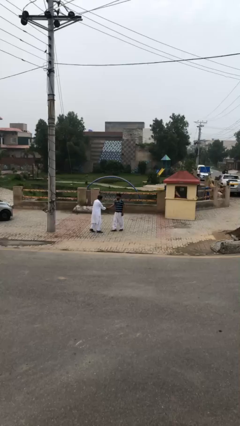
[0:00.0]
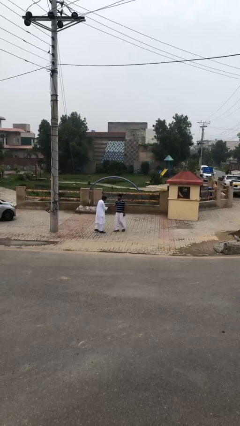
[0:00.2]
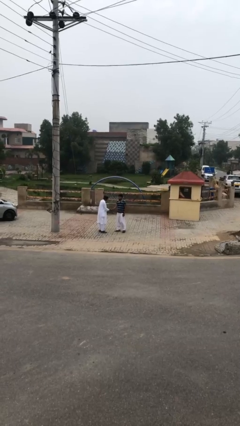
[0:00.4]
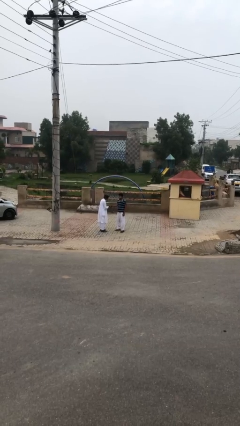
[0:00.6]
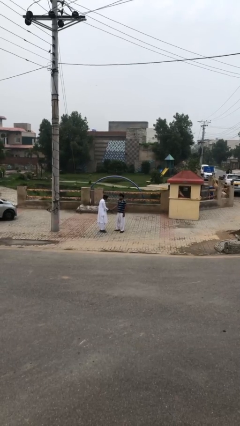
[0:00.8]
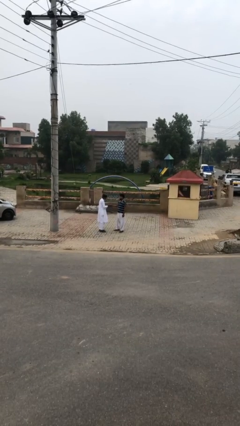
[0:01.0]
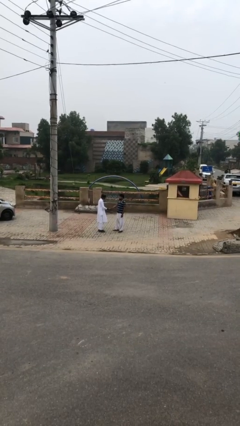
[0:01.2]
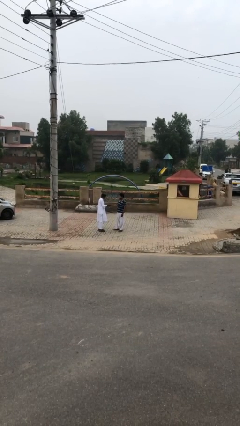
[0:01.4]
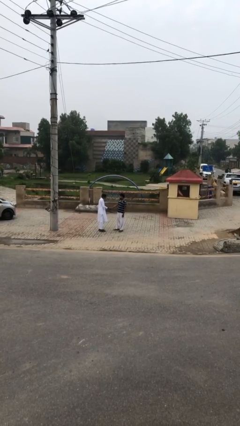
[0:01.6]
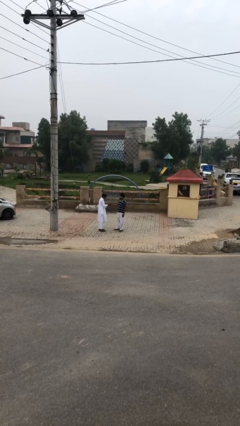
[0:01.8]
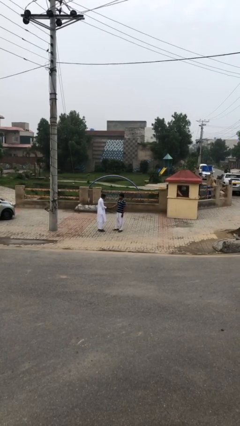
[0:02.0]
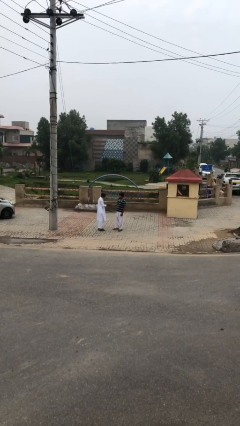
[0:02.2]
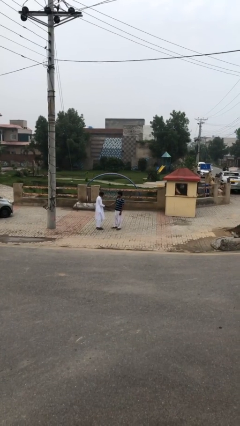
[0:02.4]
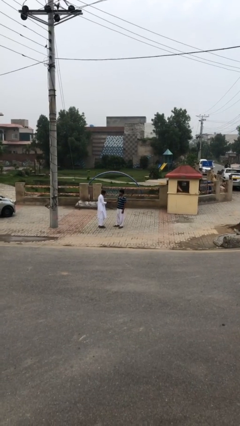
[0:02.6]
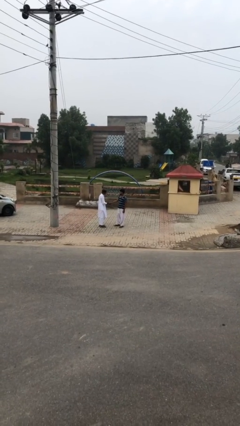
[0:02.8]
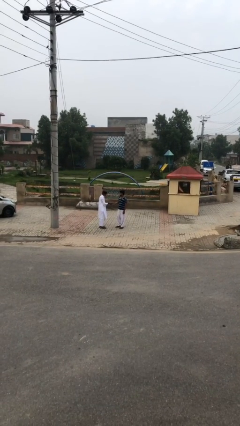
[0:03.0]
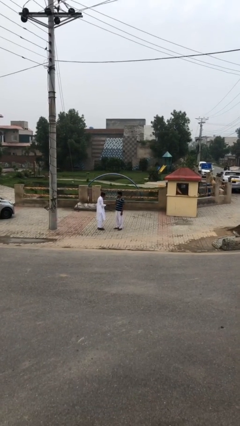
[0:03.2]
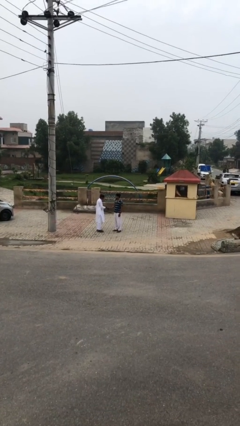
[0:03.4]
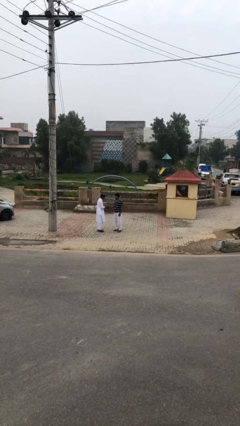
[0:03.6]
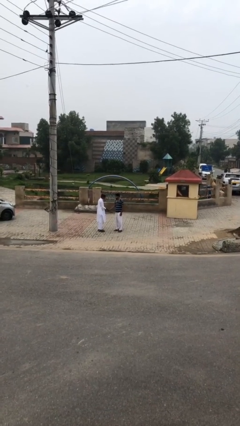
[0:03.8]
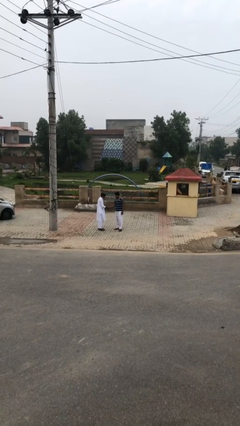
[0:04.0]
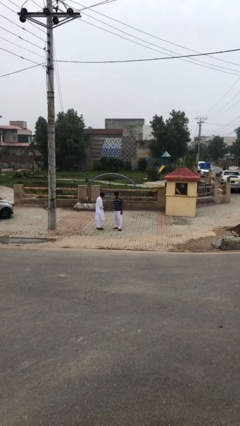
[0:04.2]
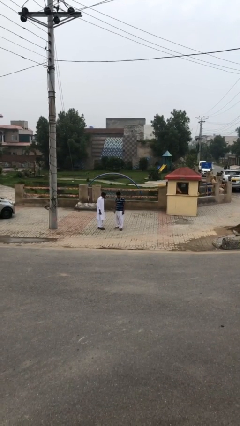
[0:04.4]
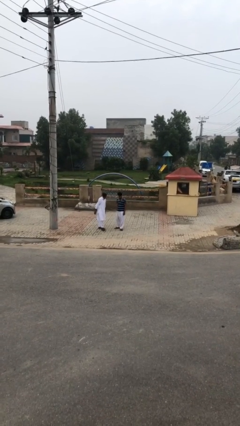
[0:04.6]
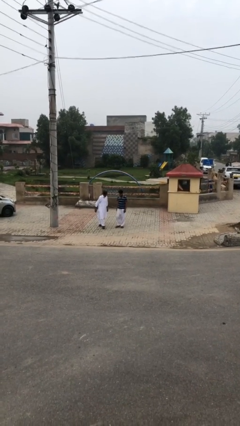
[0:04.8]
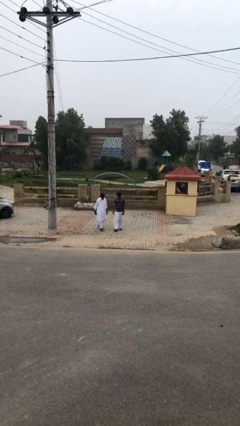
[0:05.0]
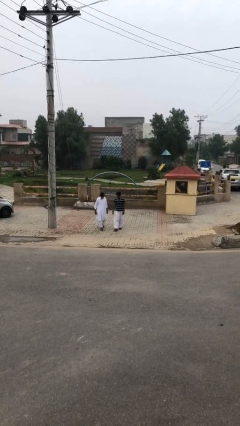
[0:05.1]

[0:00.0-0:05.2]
person shakes hand

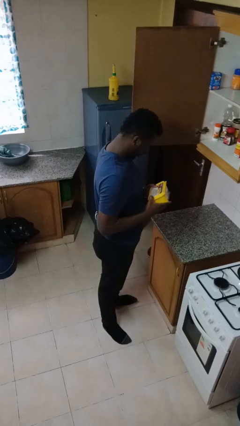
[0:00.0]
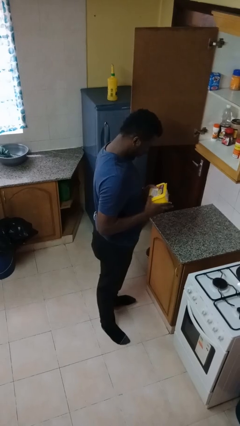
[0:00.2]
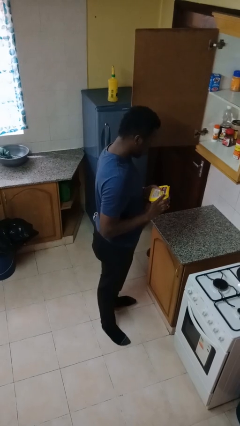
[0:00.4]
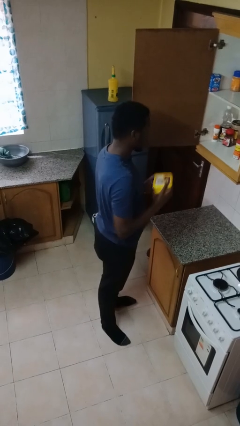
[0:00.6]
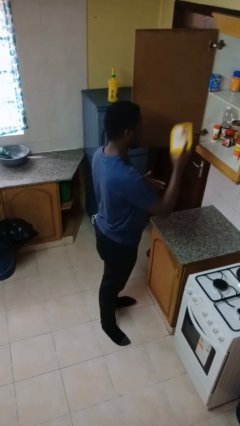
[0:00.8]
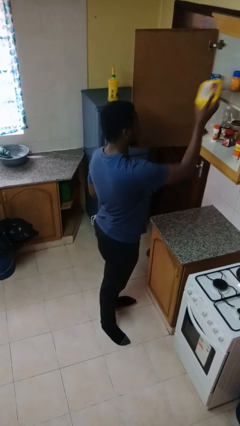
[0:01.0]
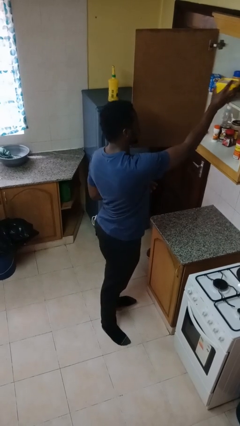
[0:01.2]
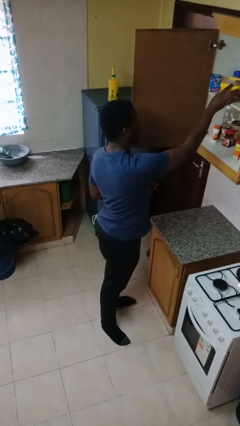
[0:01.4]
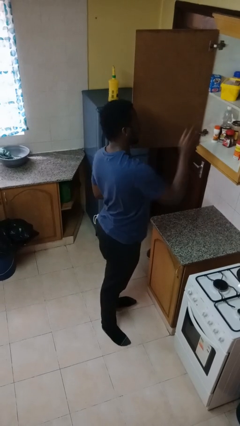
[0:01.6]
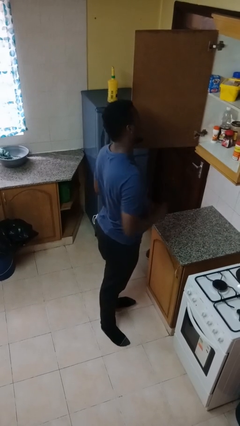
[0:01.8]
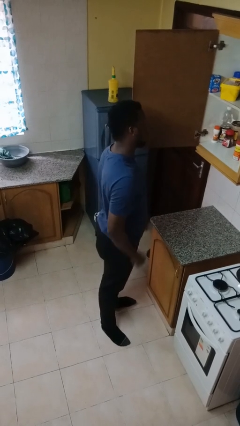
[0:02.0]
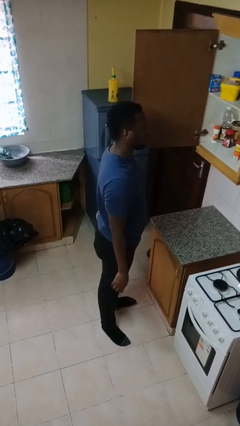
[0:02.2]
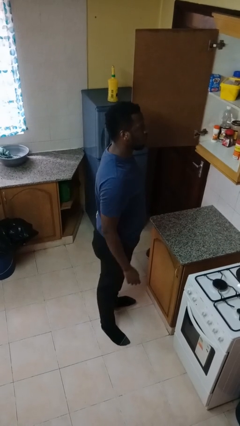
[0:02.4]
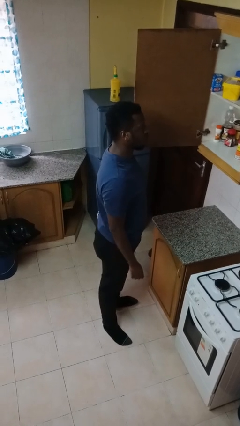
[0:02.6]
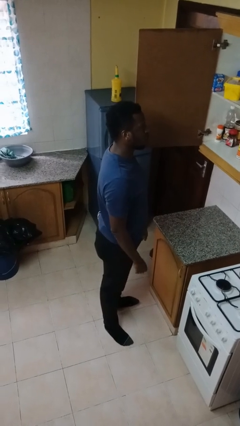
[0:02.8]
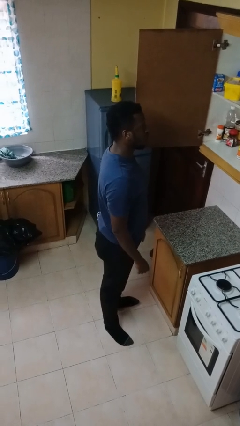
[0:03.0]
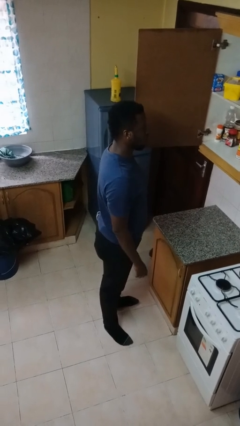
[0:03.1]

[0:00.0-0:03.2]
person puts down object on shelf

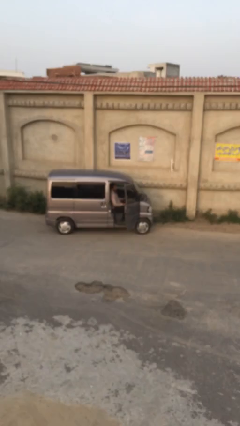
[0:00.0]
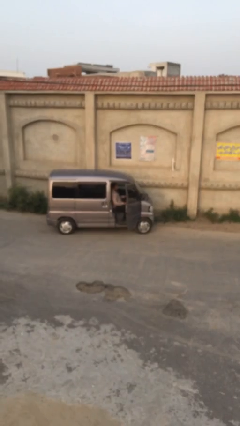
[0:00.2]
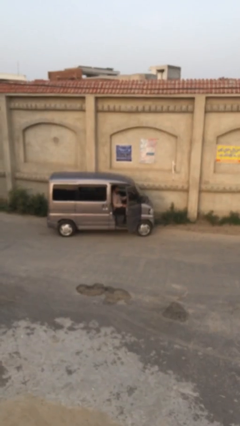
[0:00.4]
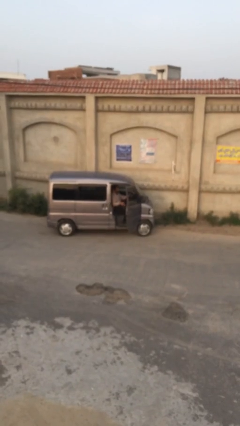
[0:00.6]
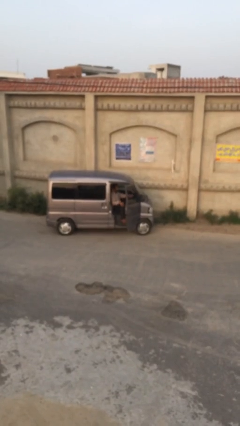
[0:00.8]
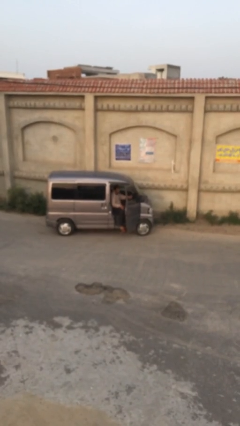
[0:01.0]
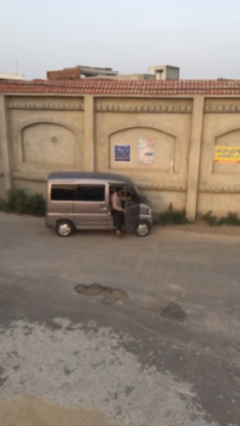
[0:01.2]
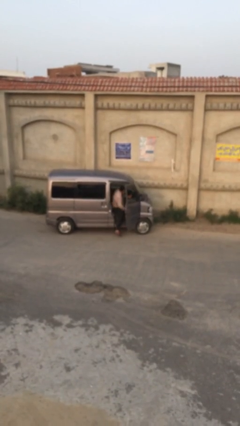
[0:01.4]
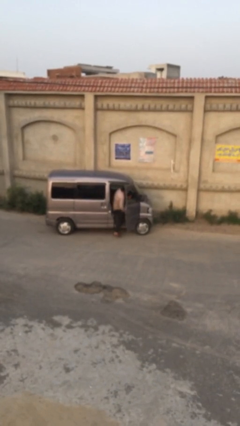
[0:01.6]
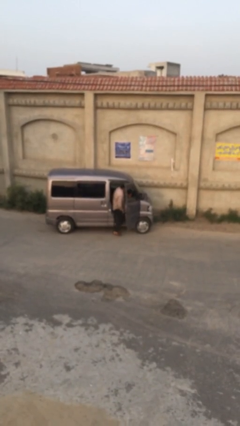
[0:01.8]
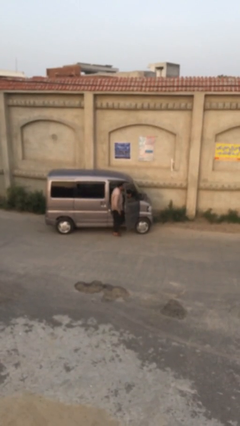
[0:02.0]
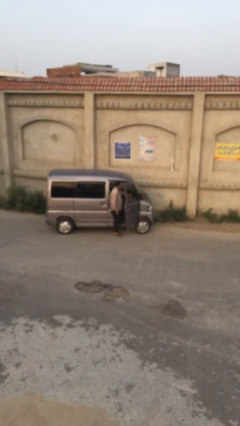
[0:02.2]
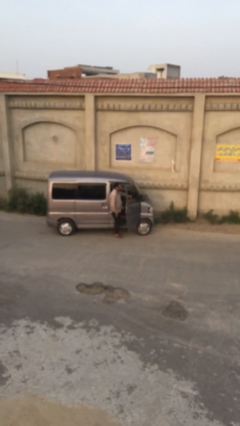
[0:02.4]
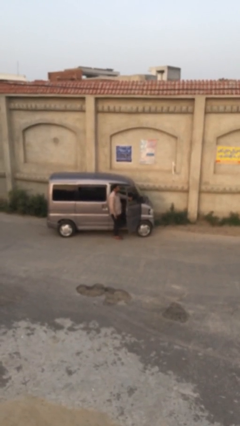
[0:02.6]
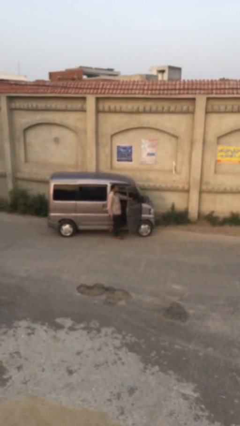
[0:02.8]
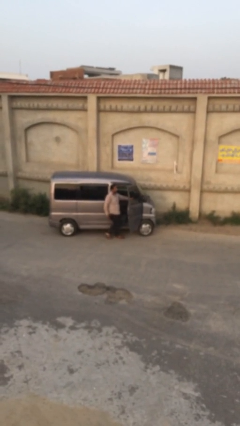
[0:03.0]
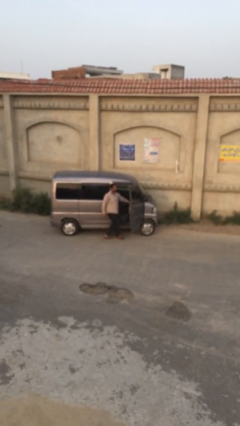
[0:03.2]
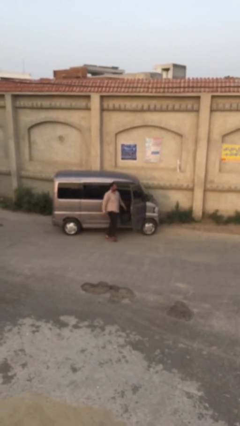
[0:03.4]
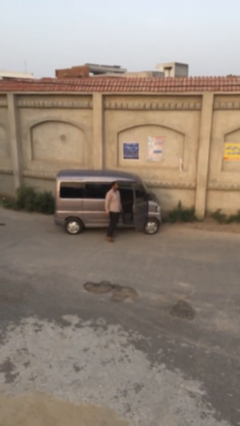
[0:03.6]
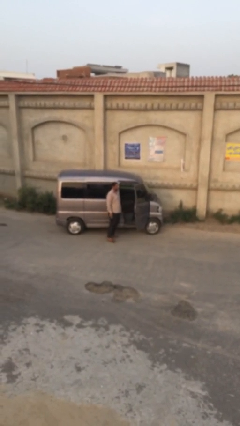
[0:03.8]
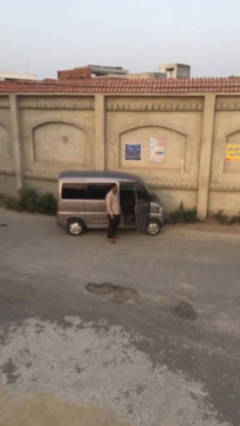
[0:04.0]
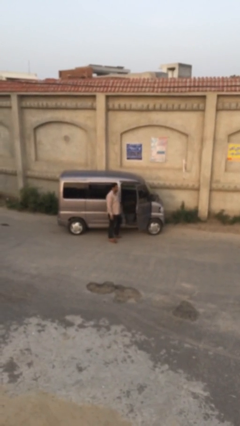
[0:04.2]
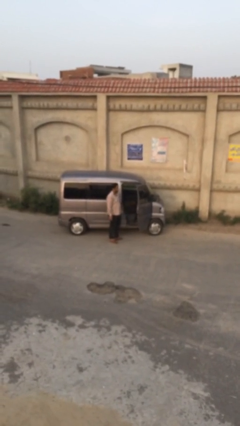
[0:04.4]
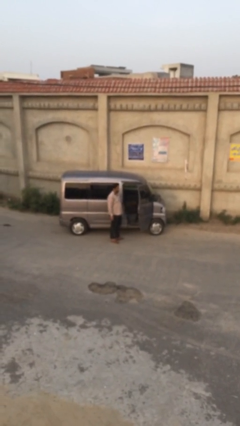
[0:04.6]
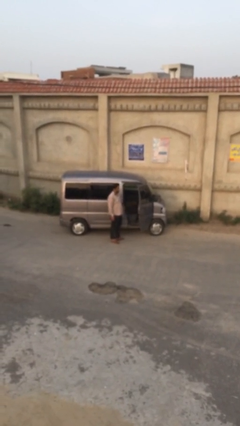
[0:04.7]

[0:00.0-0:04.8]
person exits car

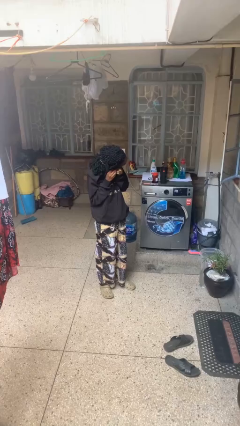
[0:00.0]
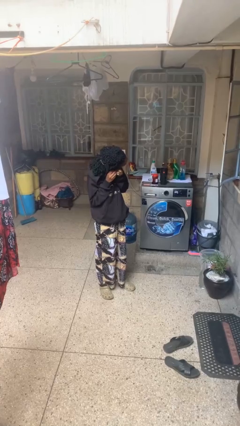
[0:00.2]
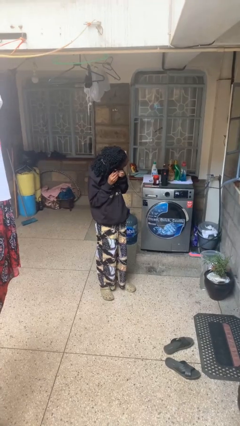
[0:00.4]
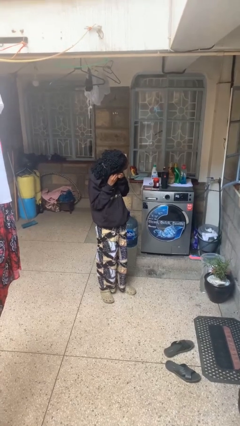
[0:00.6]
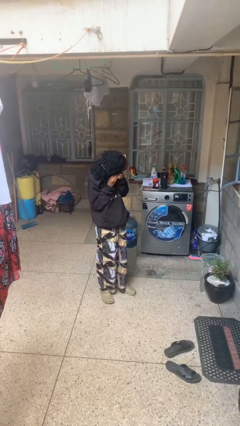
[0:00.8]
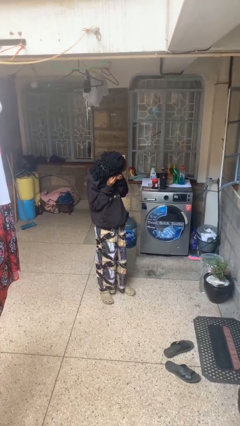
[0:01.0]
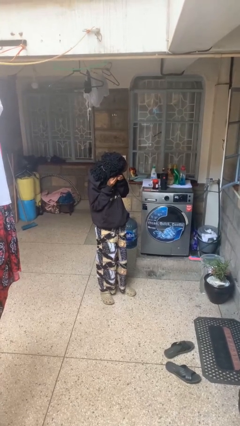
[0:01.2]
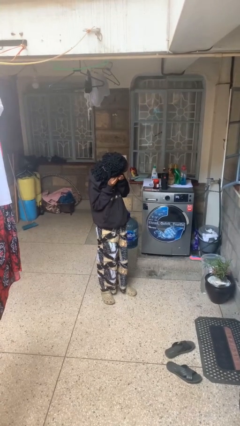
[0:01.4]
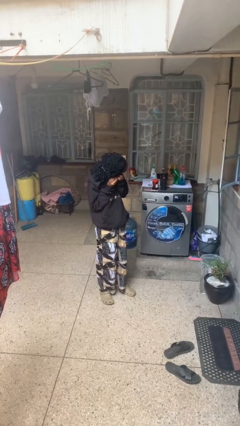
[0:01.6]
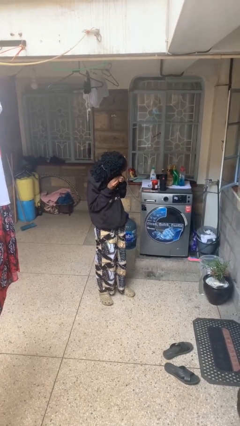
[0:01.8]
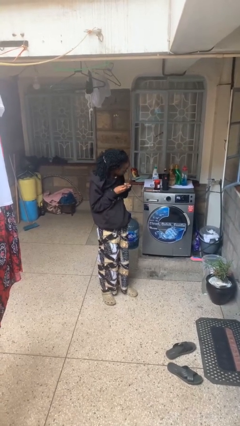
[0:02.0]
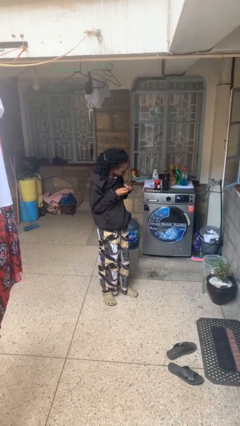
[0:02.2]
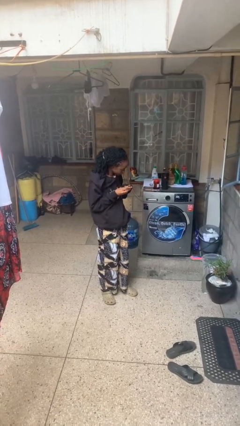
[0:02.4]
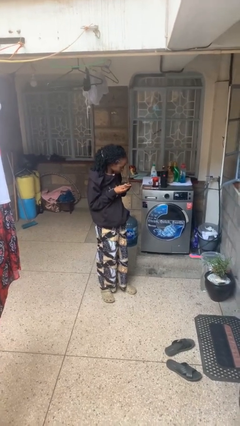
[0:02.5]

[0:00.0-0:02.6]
person takes off earrings

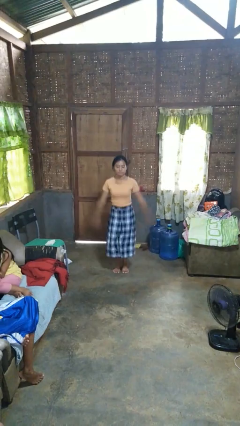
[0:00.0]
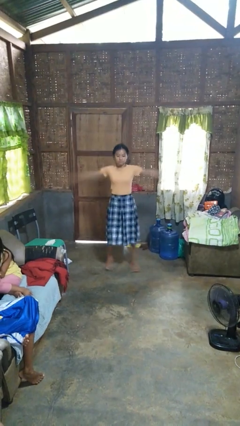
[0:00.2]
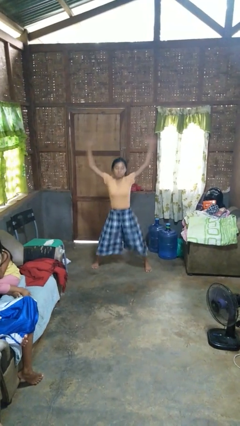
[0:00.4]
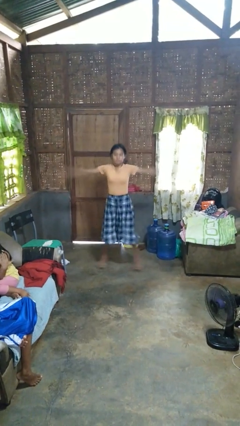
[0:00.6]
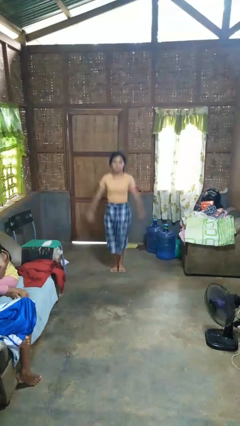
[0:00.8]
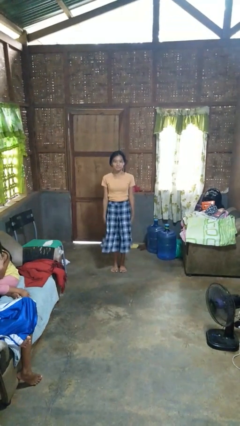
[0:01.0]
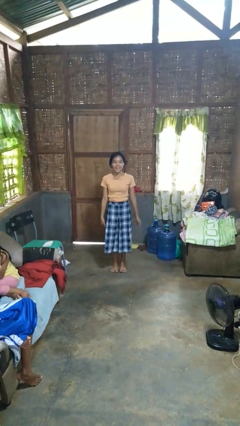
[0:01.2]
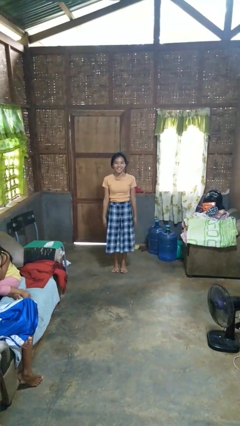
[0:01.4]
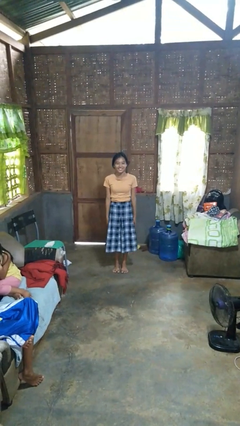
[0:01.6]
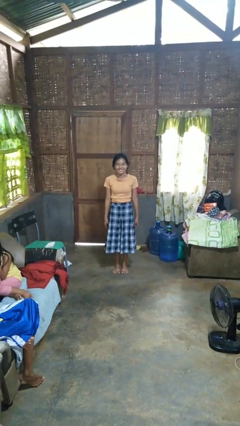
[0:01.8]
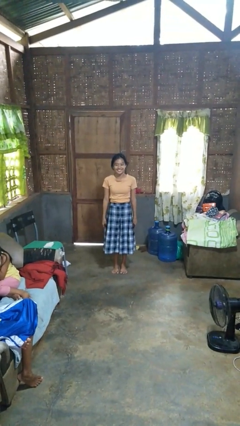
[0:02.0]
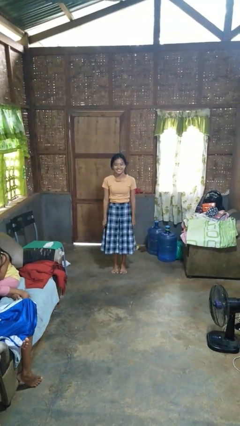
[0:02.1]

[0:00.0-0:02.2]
person exercises with jumping jacks
